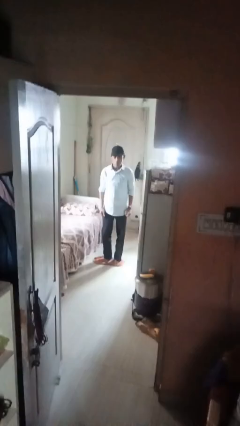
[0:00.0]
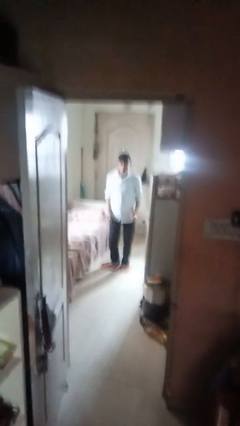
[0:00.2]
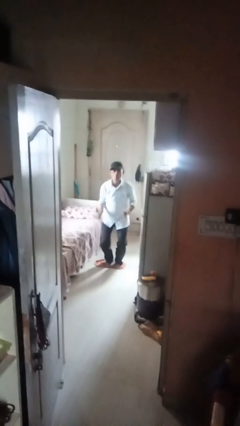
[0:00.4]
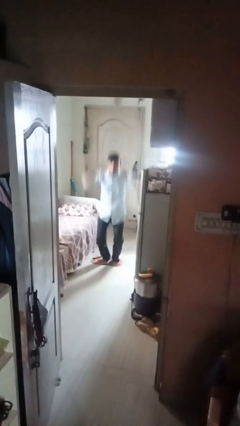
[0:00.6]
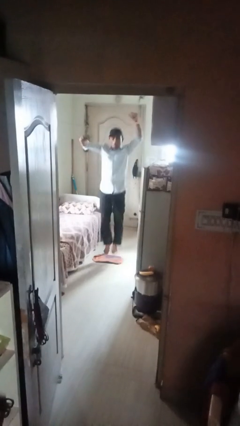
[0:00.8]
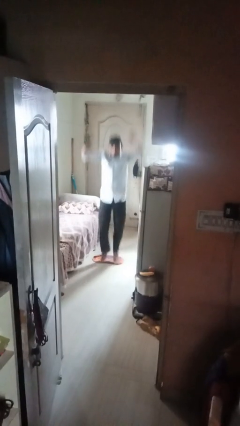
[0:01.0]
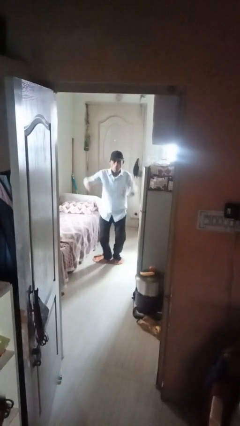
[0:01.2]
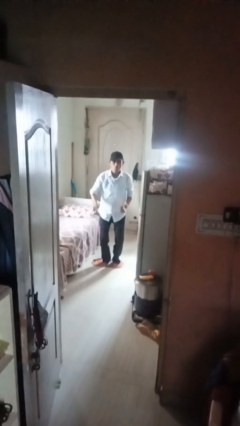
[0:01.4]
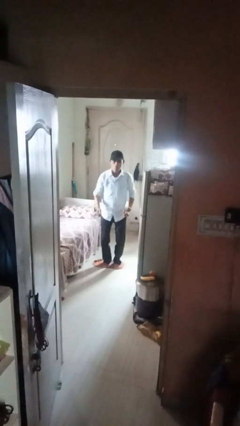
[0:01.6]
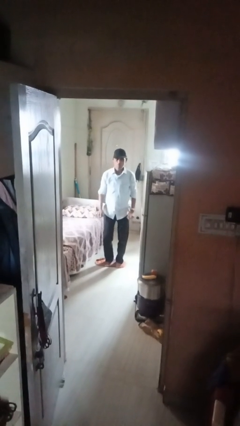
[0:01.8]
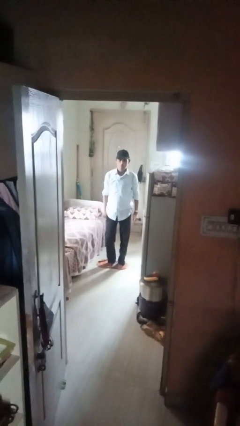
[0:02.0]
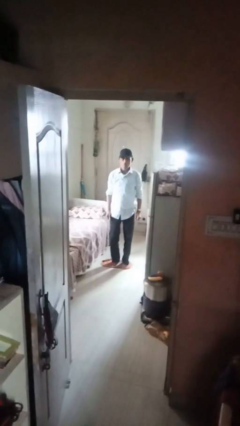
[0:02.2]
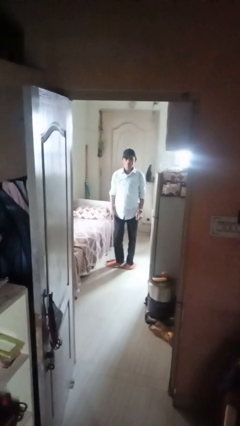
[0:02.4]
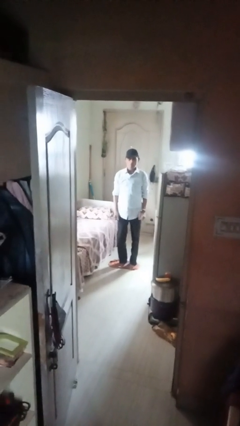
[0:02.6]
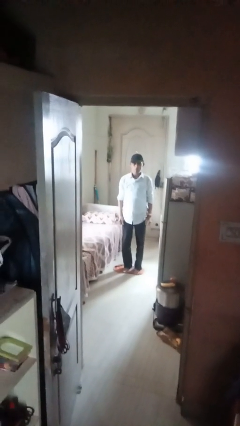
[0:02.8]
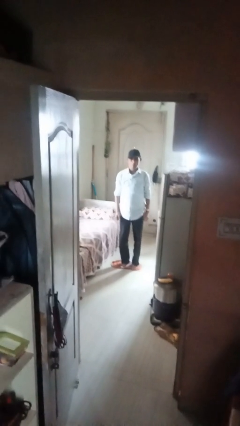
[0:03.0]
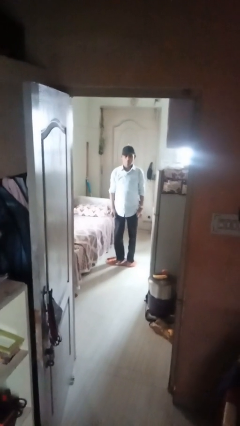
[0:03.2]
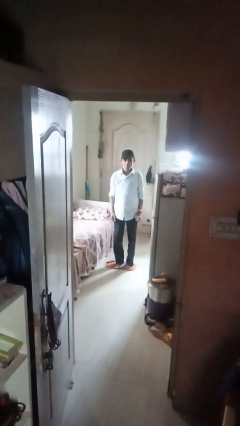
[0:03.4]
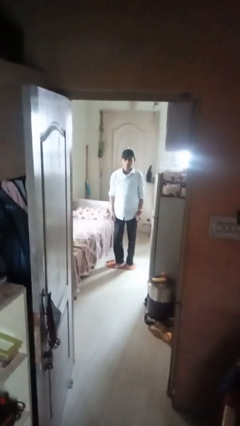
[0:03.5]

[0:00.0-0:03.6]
person jumps

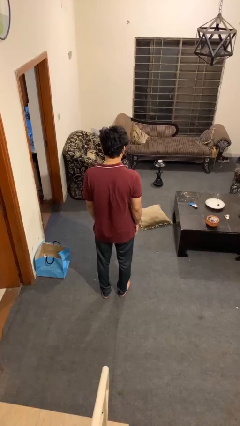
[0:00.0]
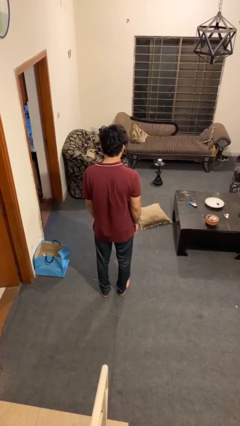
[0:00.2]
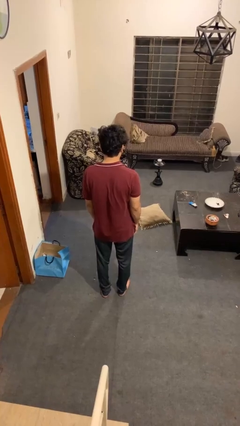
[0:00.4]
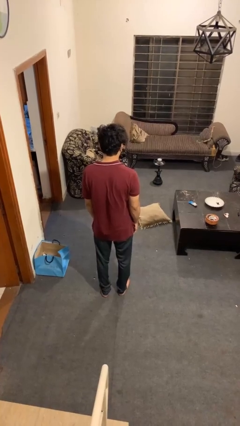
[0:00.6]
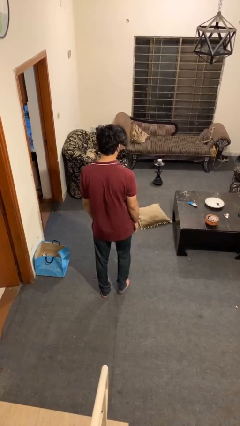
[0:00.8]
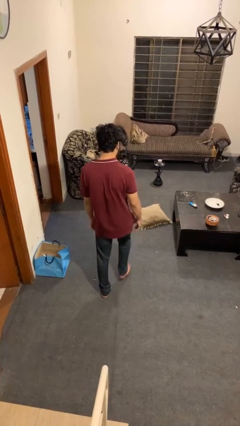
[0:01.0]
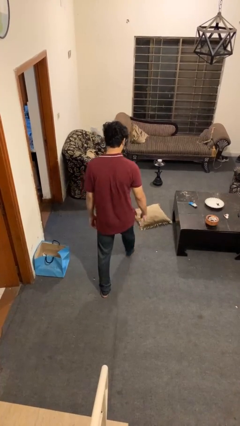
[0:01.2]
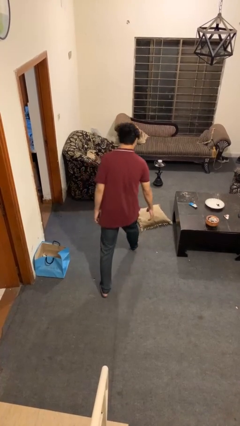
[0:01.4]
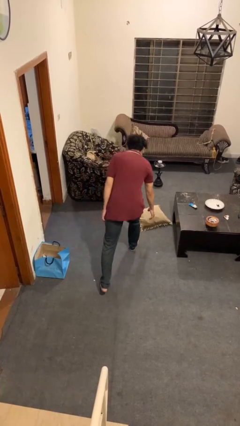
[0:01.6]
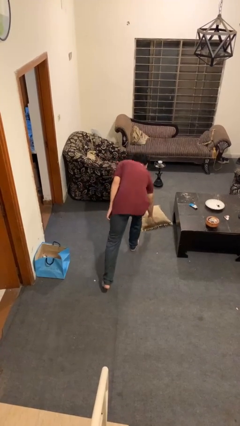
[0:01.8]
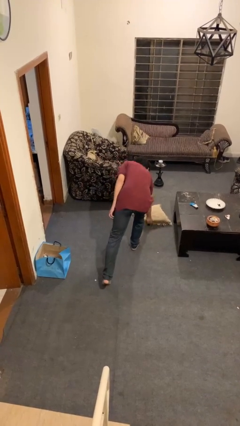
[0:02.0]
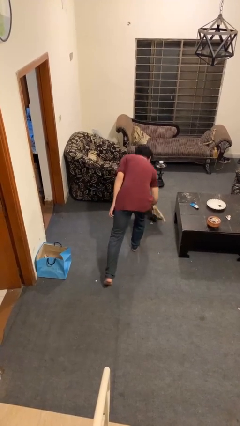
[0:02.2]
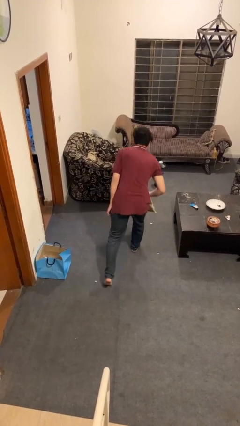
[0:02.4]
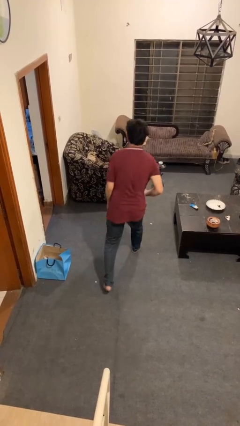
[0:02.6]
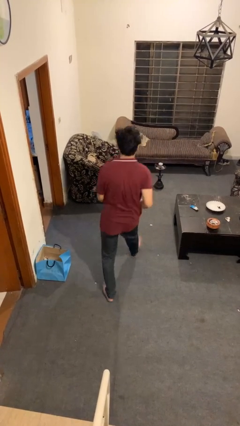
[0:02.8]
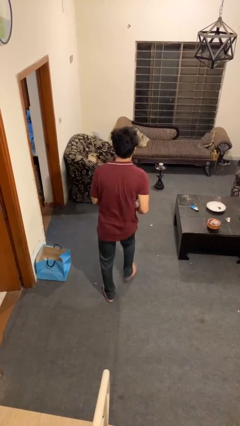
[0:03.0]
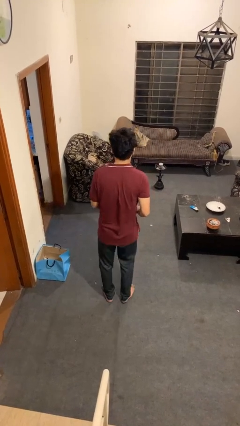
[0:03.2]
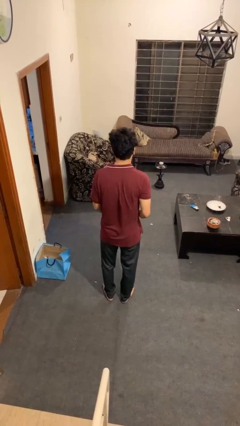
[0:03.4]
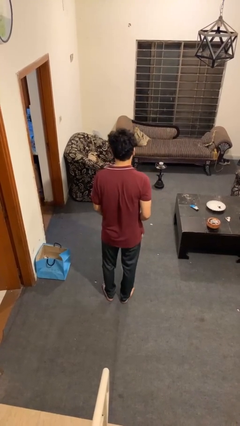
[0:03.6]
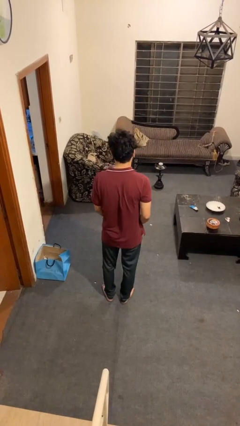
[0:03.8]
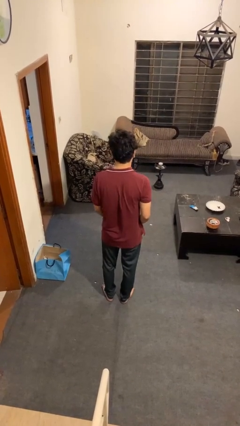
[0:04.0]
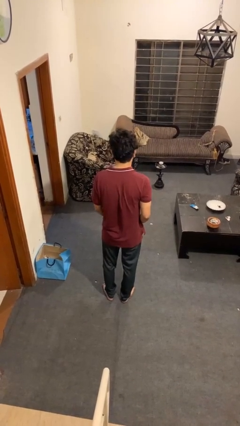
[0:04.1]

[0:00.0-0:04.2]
person picks up object from floor

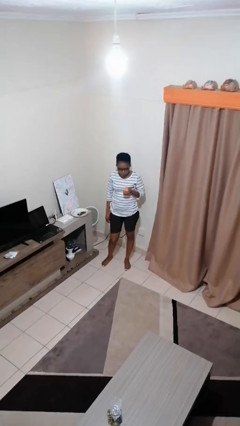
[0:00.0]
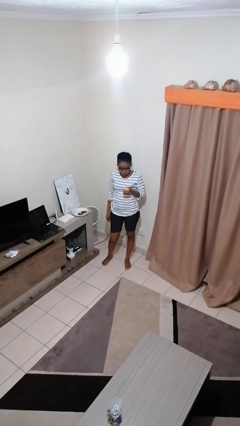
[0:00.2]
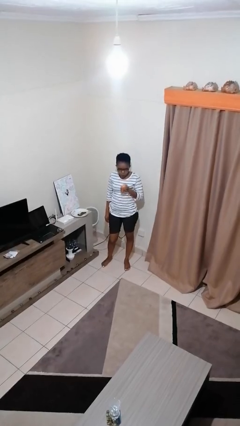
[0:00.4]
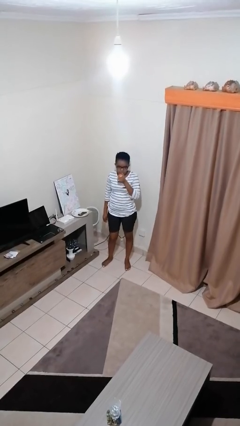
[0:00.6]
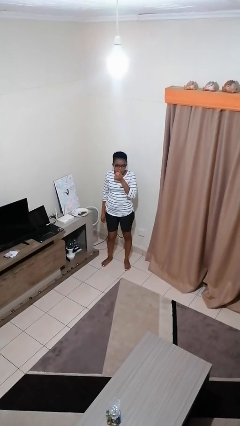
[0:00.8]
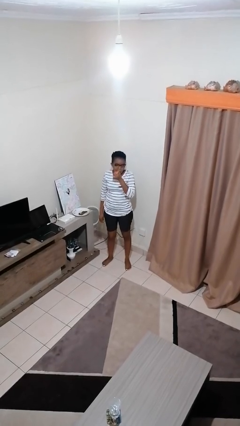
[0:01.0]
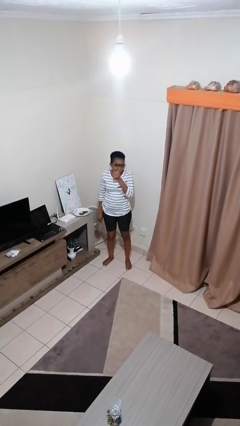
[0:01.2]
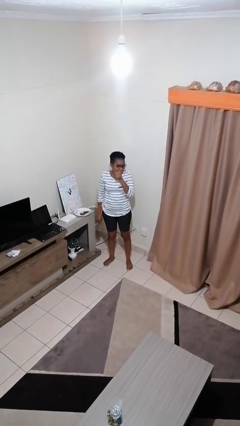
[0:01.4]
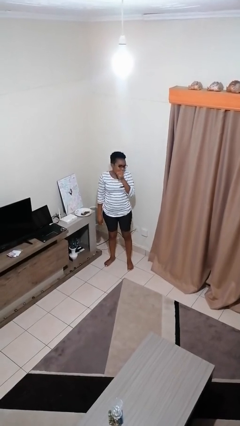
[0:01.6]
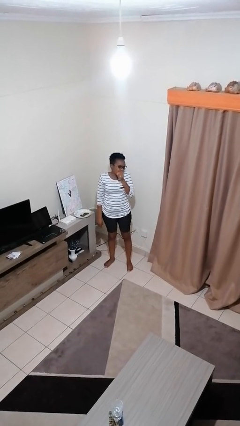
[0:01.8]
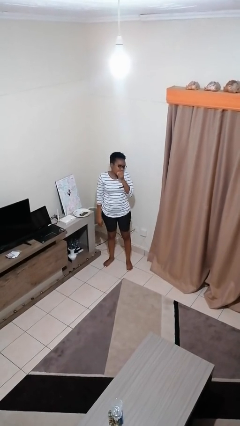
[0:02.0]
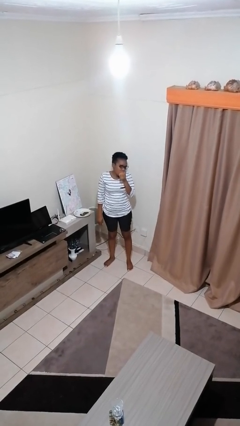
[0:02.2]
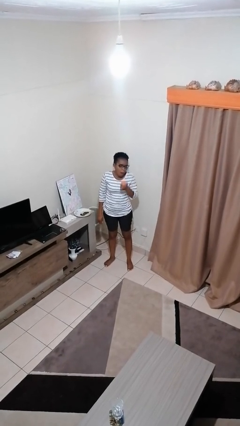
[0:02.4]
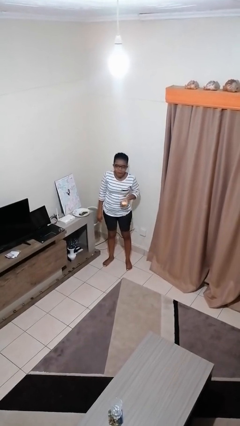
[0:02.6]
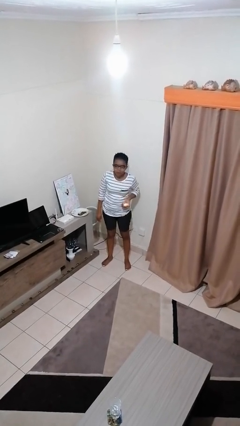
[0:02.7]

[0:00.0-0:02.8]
person eats apple

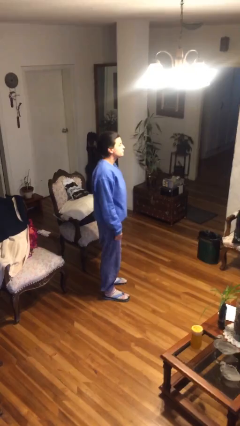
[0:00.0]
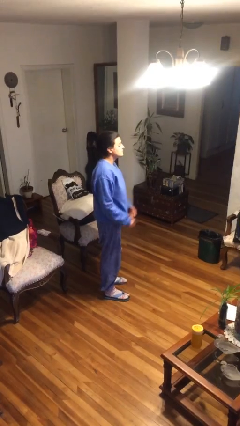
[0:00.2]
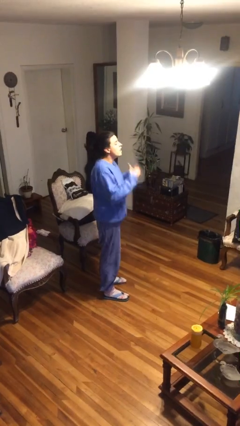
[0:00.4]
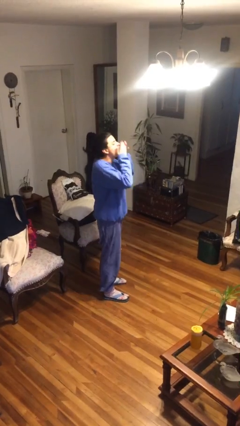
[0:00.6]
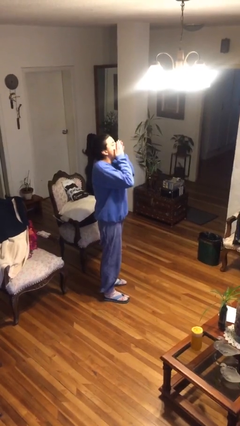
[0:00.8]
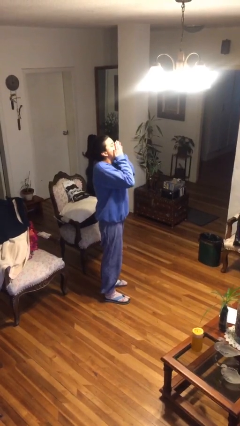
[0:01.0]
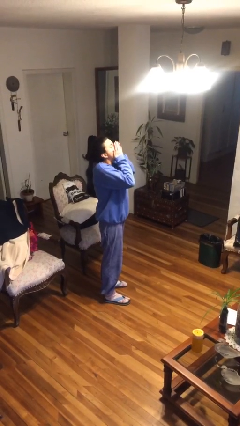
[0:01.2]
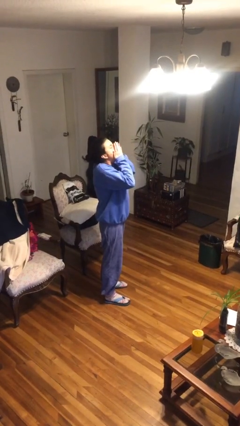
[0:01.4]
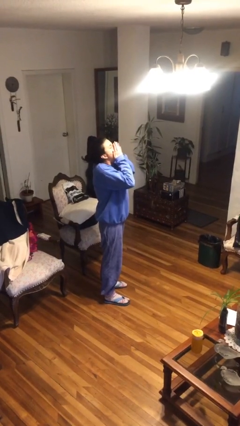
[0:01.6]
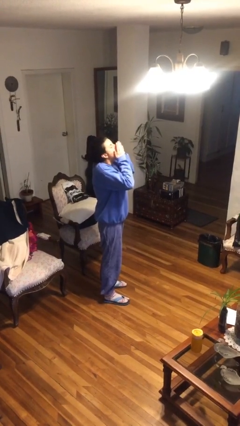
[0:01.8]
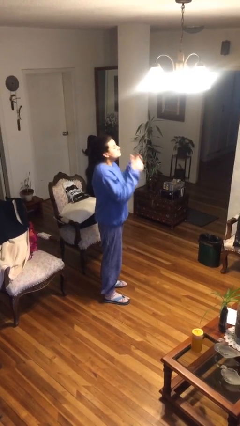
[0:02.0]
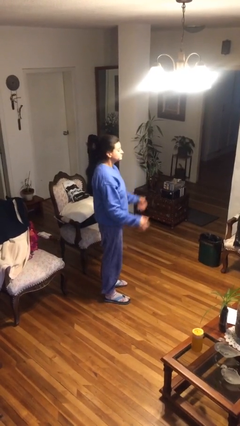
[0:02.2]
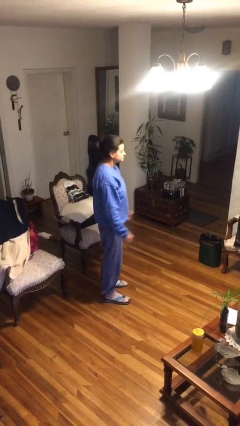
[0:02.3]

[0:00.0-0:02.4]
person yawns

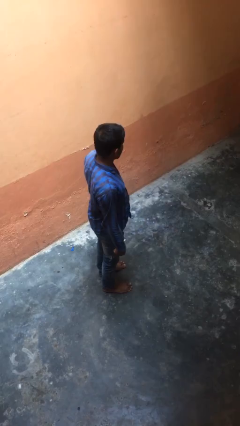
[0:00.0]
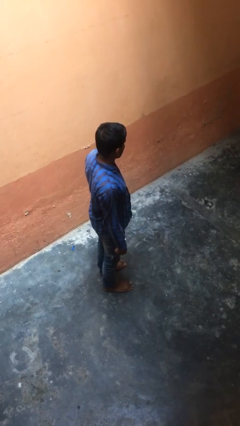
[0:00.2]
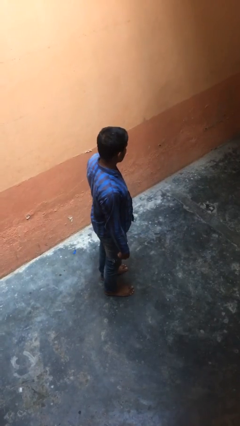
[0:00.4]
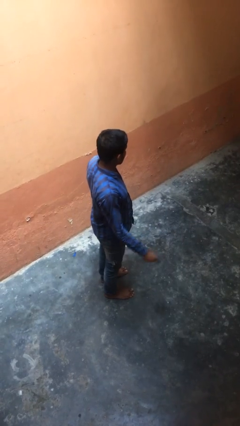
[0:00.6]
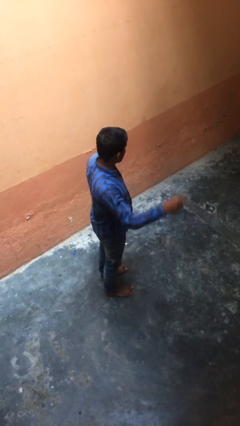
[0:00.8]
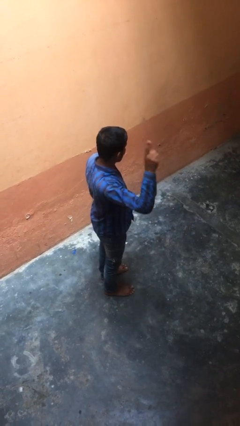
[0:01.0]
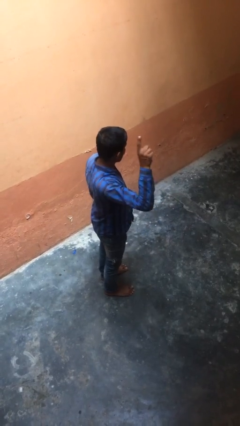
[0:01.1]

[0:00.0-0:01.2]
person gestures number one

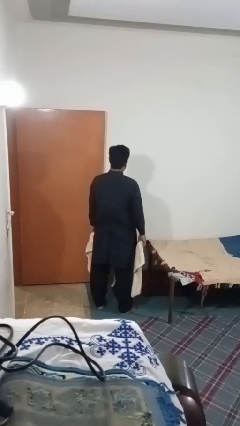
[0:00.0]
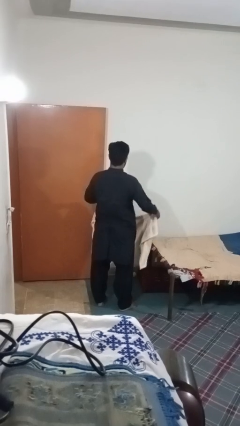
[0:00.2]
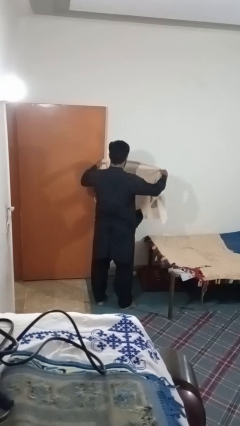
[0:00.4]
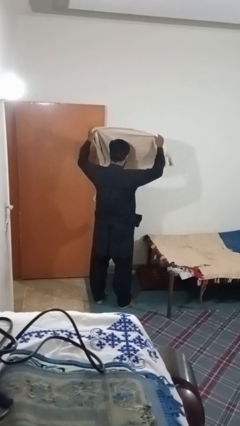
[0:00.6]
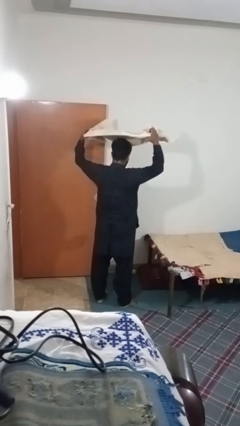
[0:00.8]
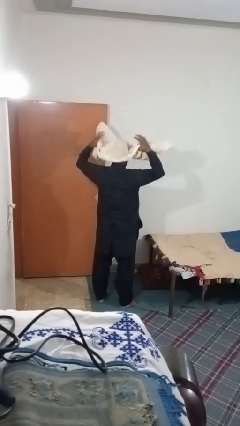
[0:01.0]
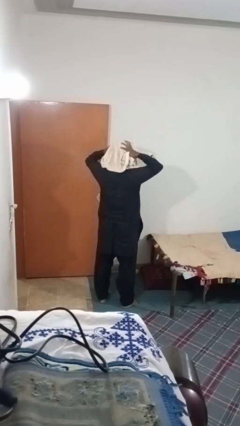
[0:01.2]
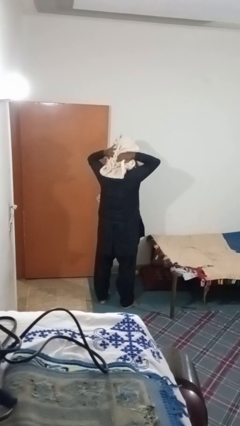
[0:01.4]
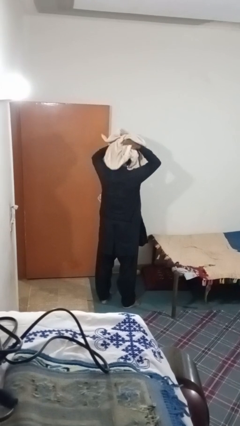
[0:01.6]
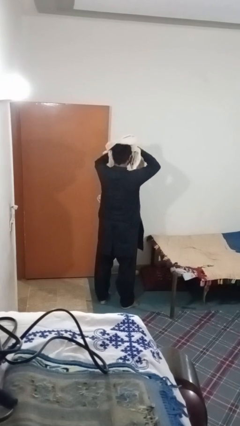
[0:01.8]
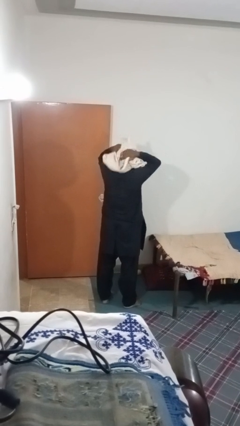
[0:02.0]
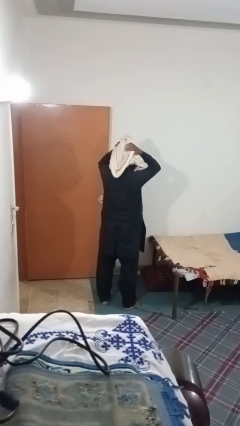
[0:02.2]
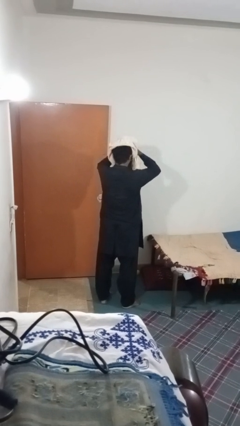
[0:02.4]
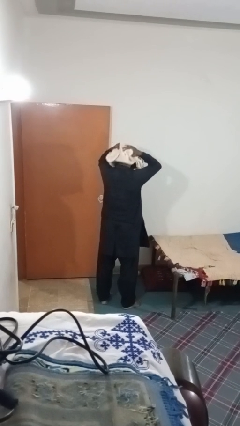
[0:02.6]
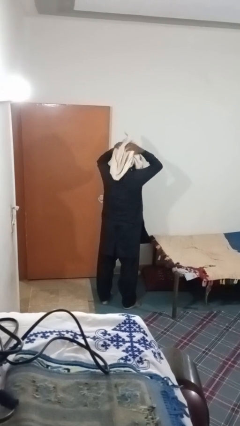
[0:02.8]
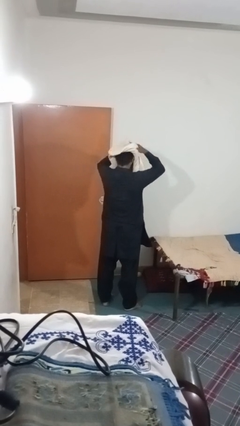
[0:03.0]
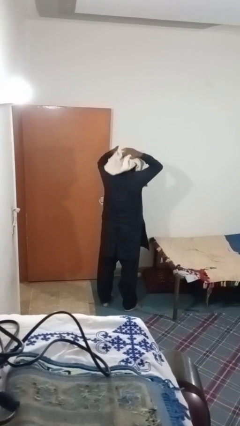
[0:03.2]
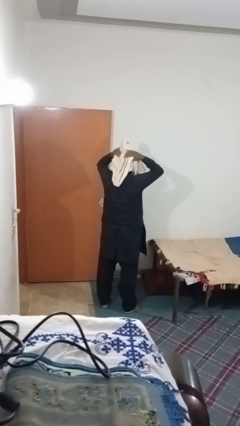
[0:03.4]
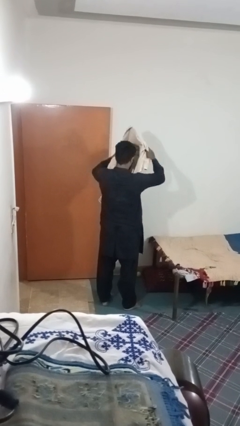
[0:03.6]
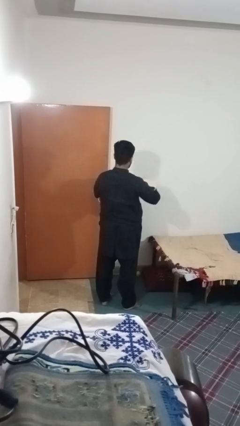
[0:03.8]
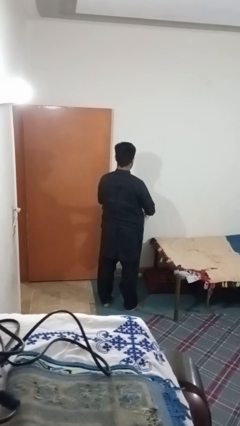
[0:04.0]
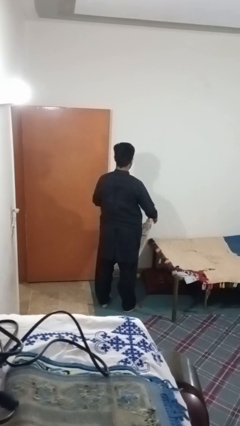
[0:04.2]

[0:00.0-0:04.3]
person dries hair with towel
